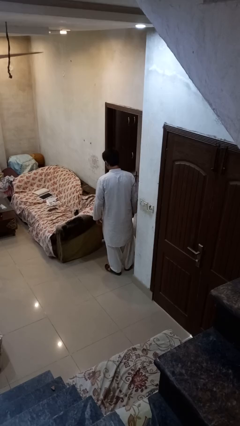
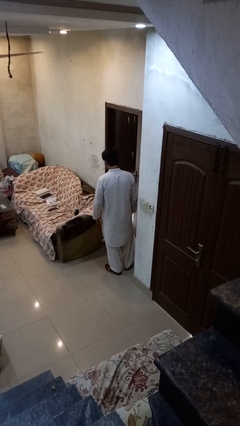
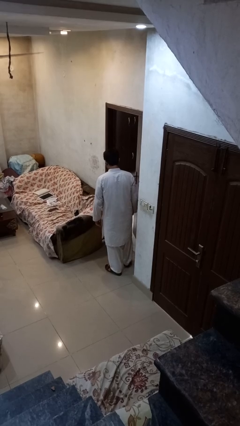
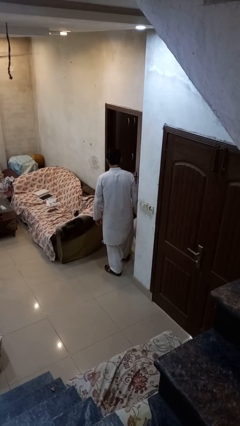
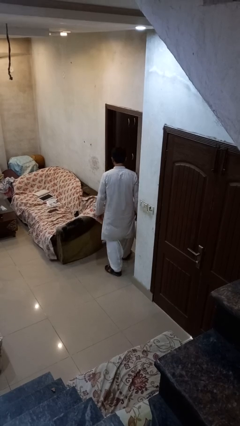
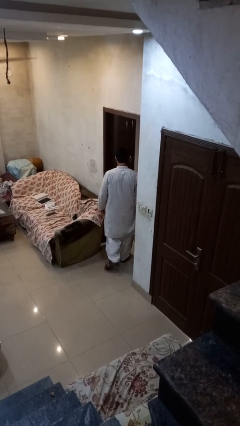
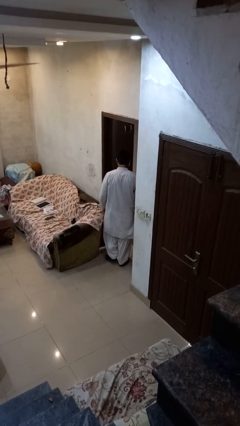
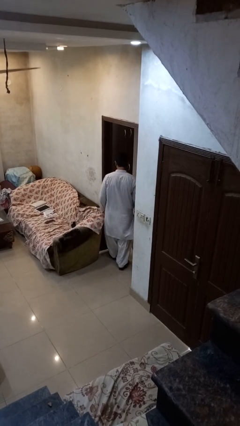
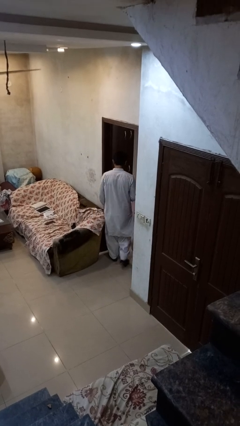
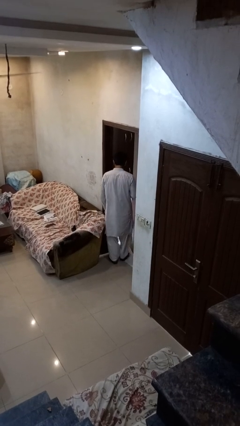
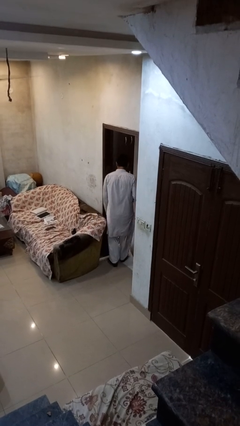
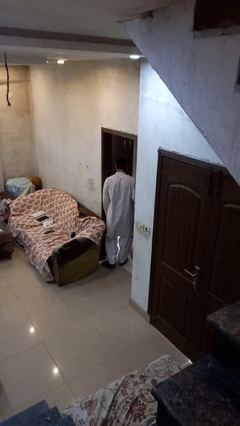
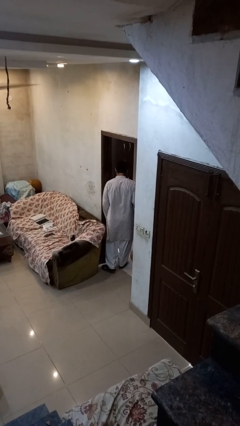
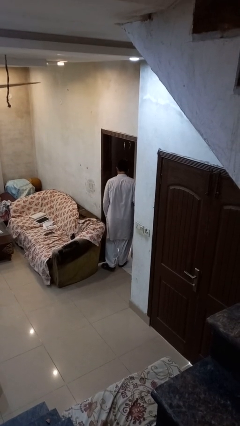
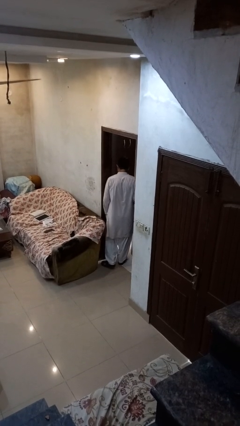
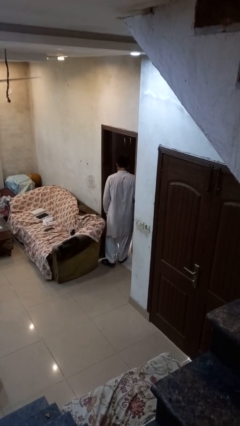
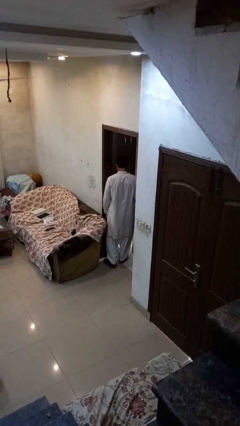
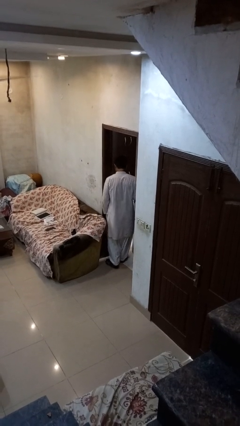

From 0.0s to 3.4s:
person bumps into wall

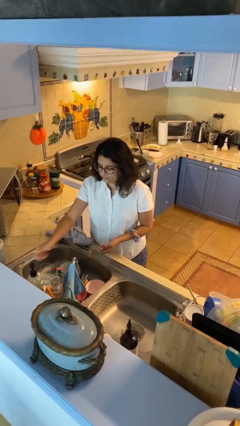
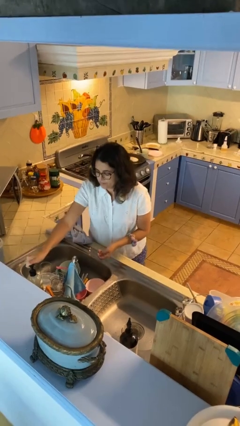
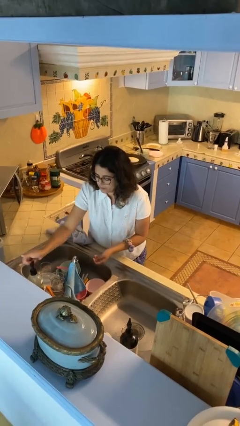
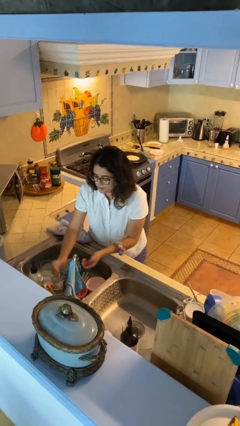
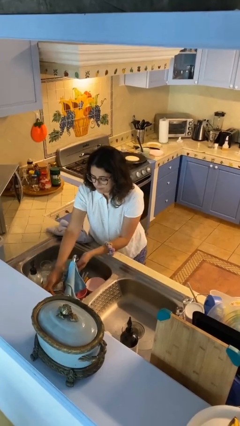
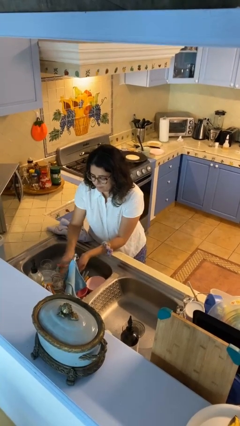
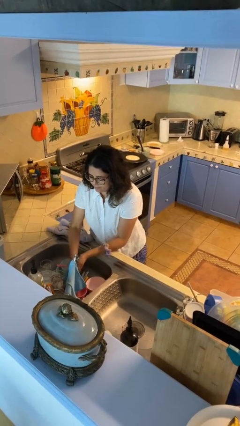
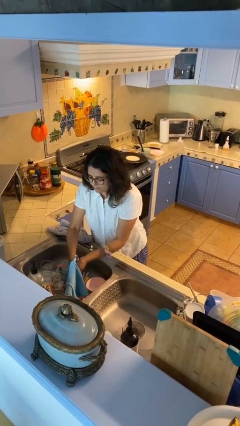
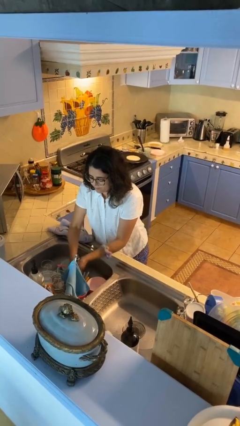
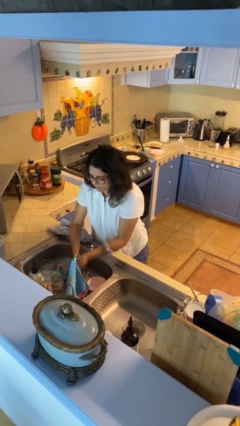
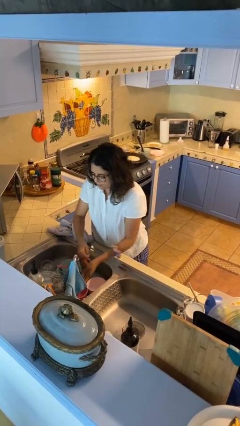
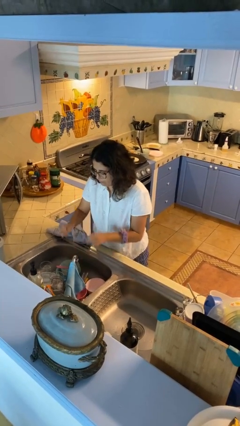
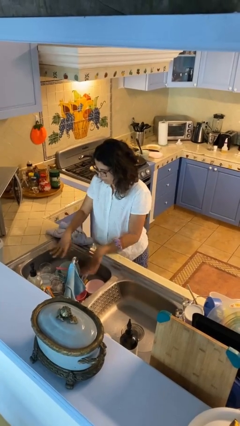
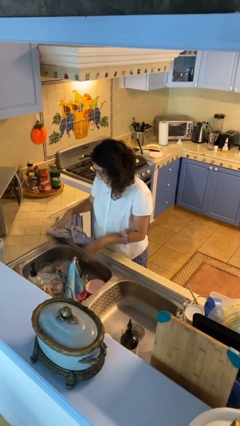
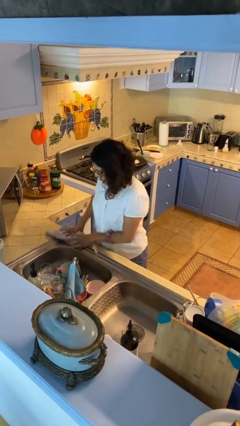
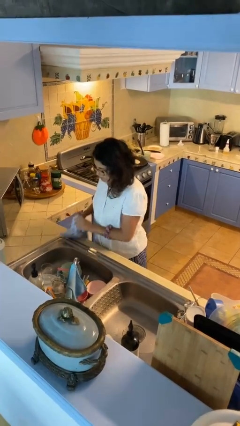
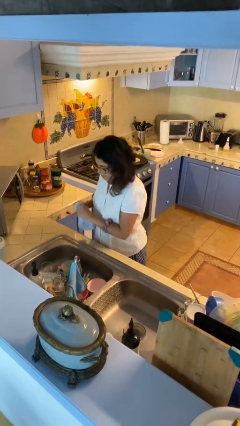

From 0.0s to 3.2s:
person washes hands

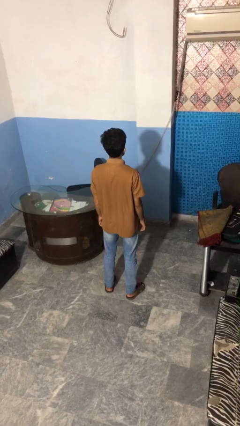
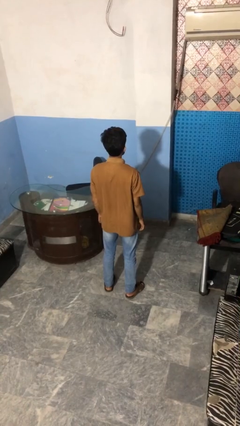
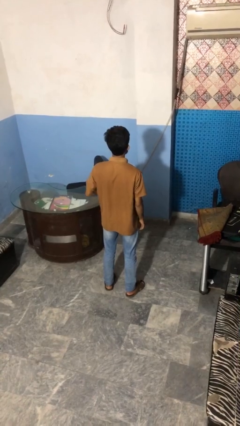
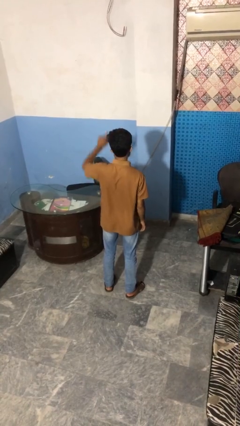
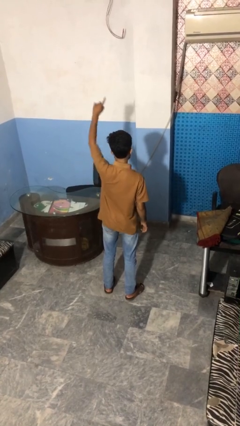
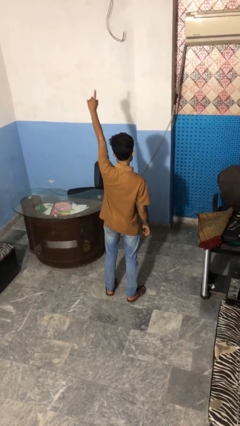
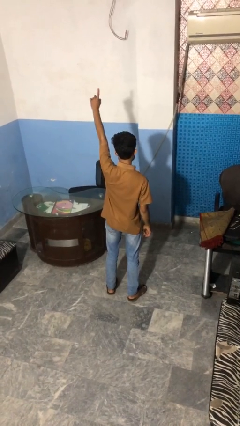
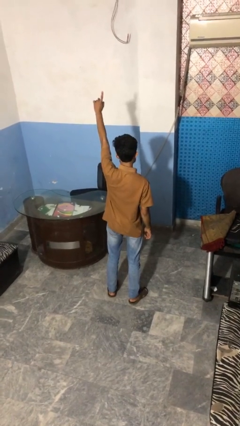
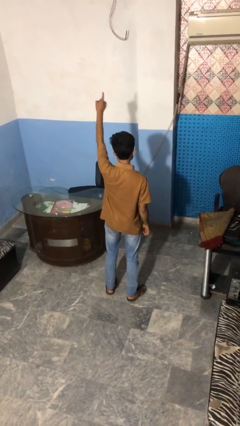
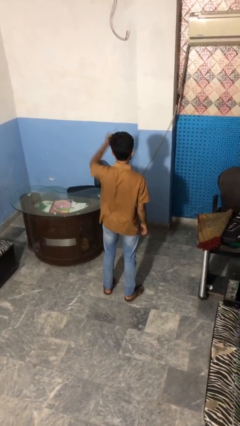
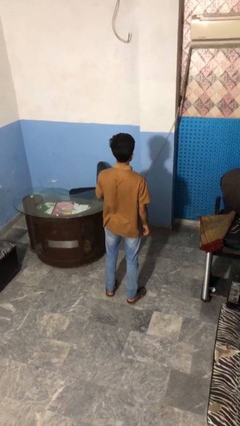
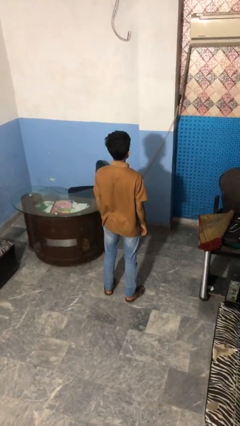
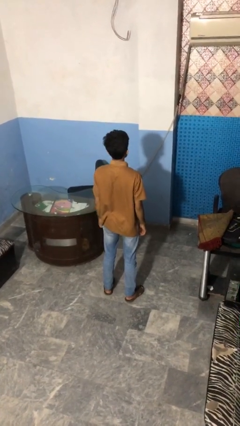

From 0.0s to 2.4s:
person gestures number one

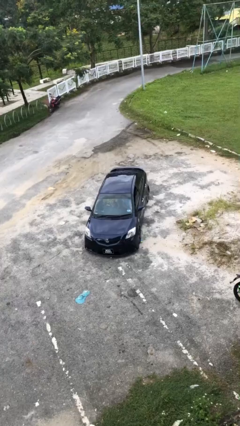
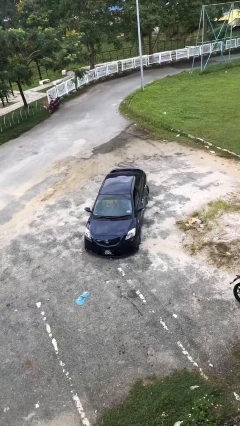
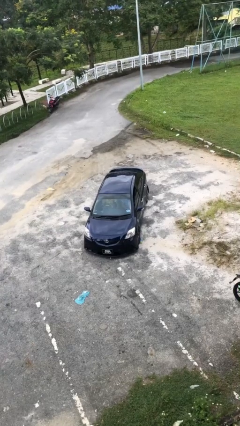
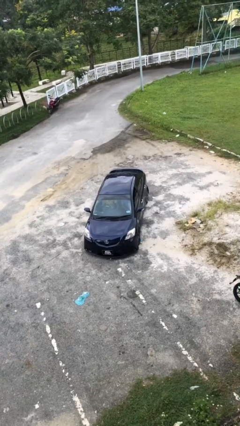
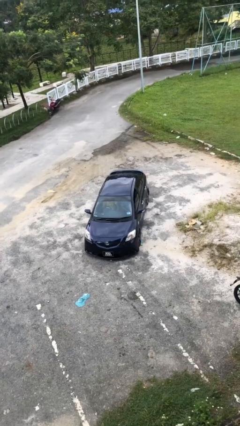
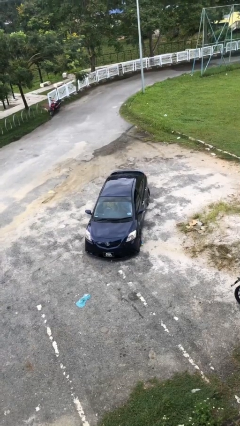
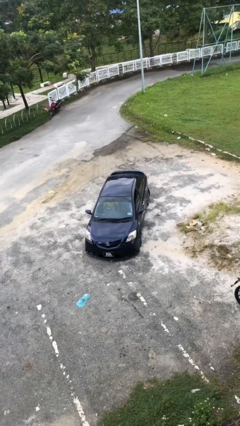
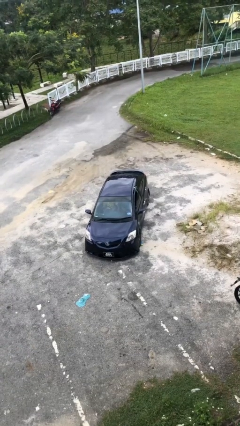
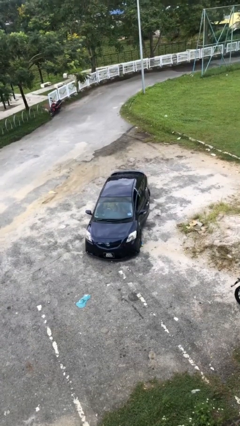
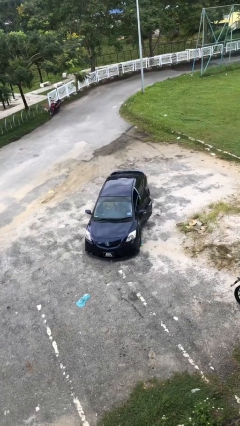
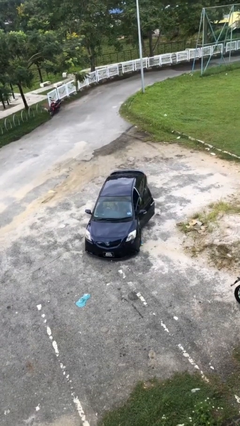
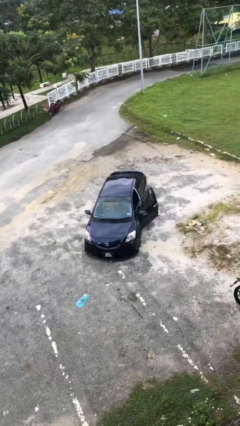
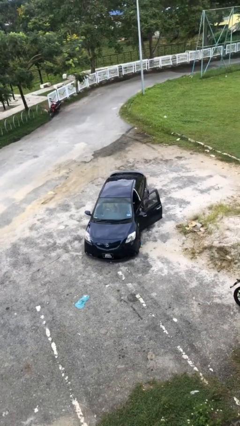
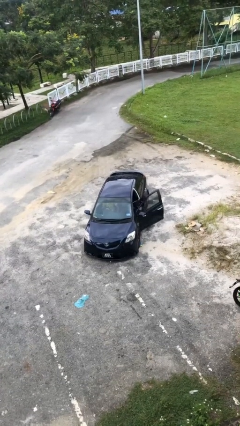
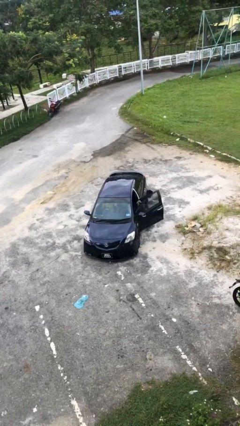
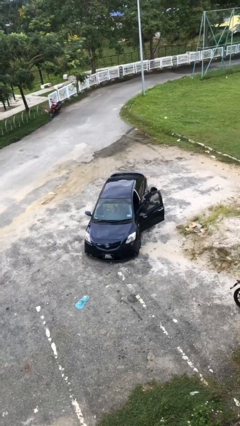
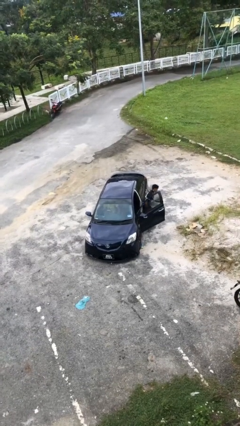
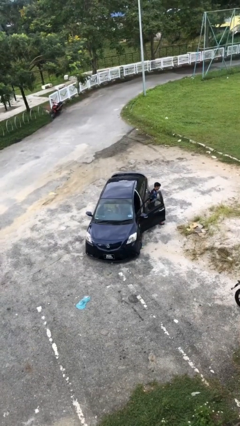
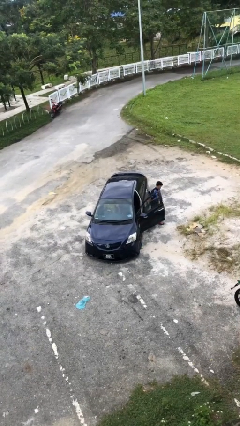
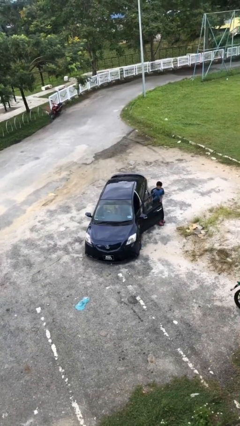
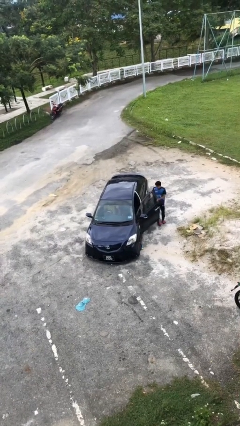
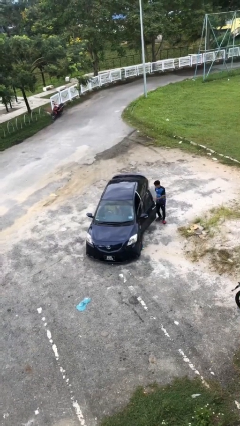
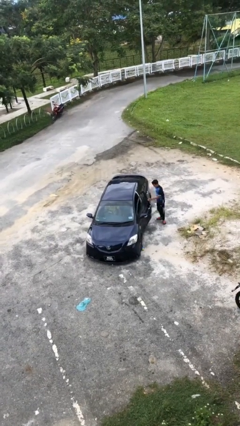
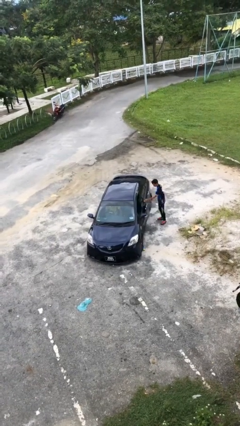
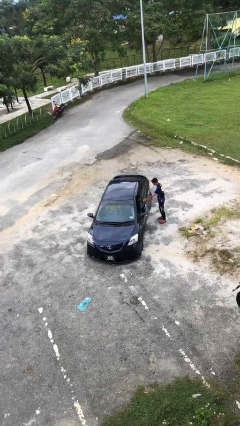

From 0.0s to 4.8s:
car drops off person

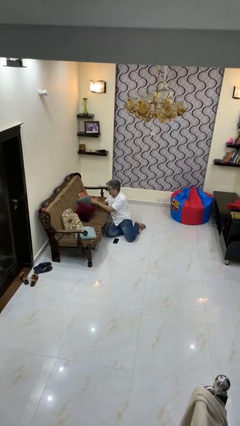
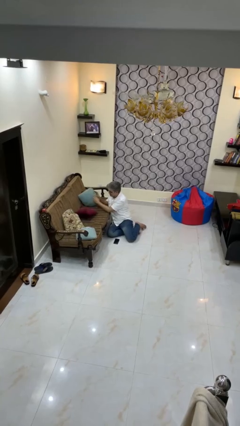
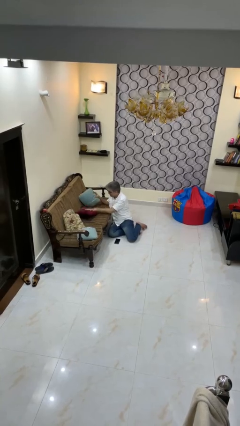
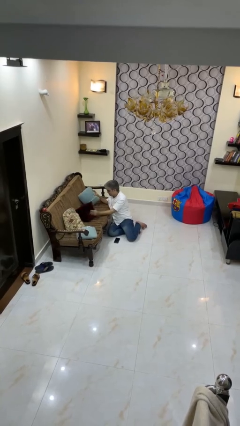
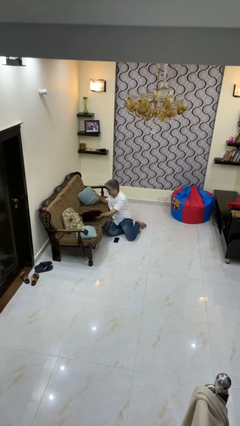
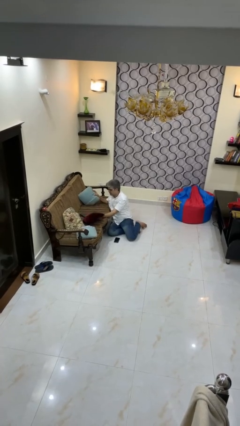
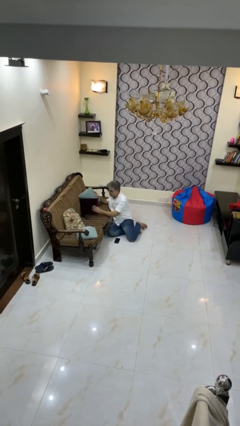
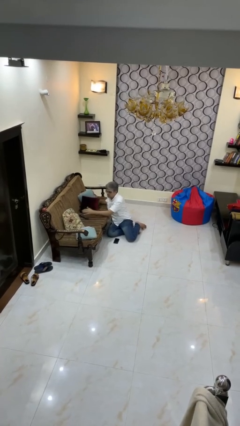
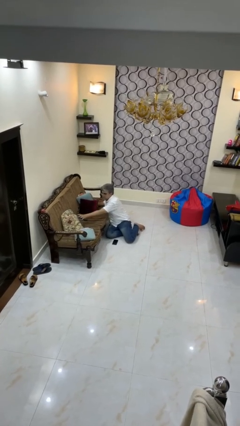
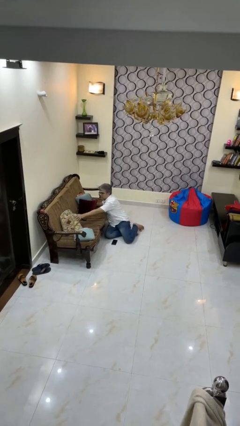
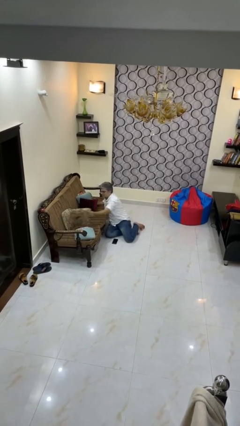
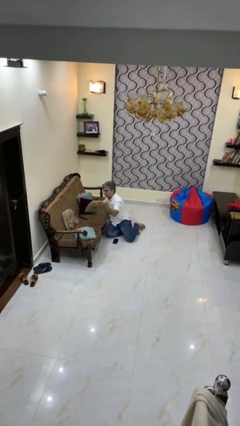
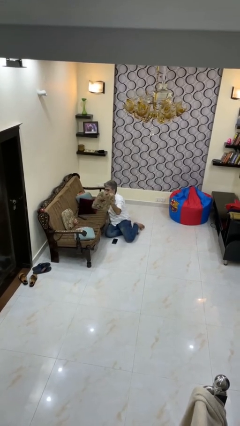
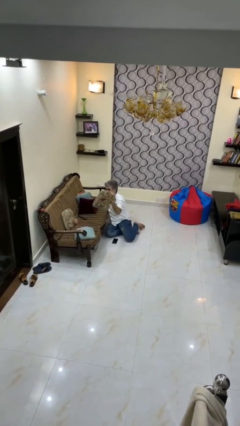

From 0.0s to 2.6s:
person searches in couch

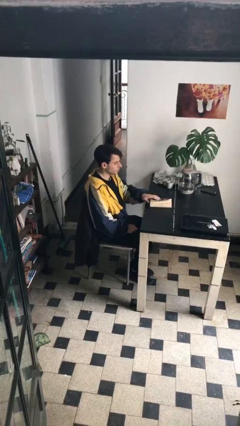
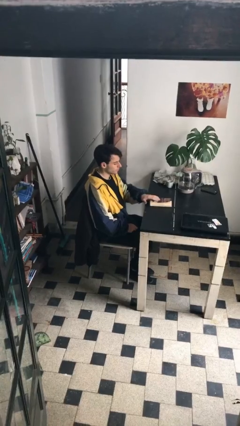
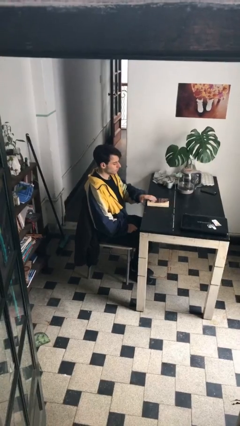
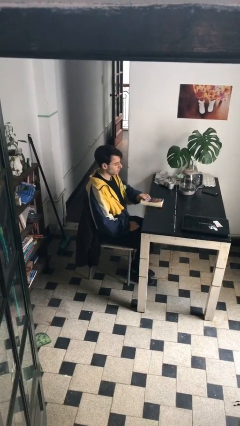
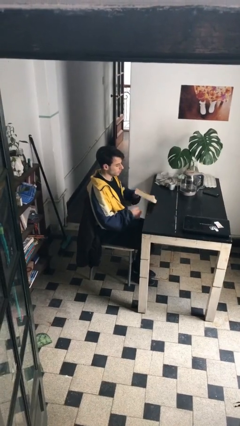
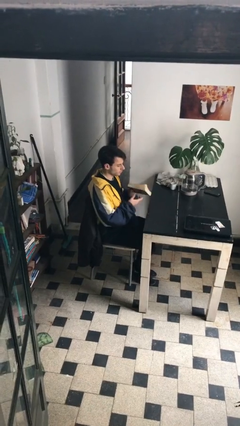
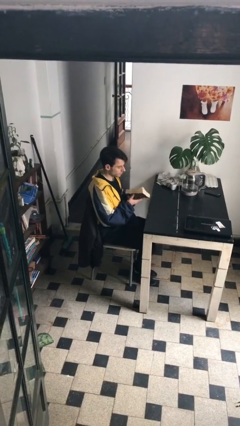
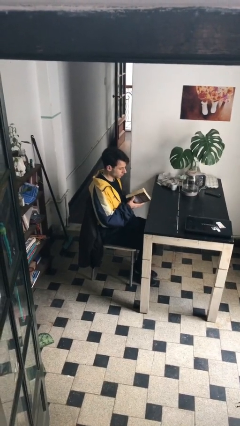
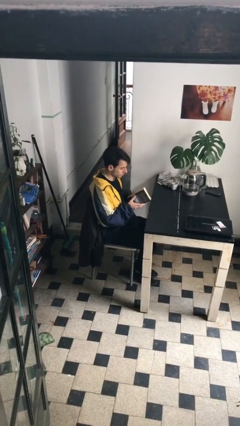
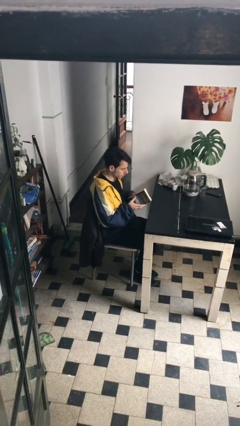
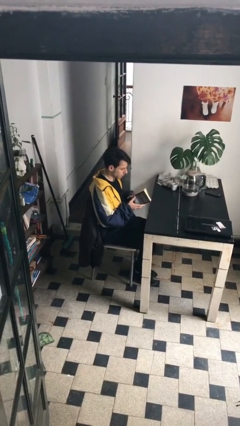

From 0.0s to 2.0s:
person picks up object from table
